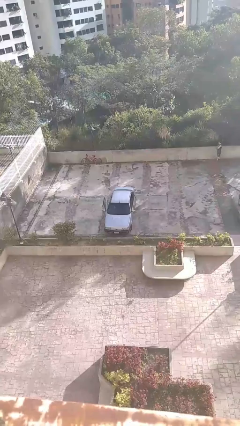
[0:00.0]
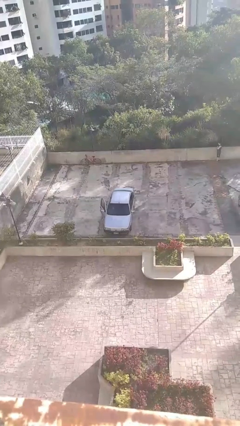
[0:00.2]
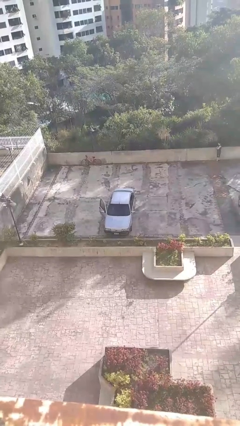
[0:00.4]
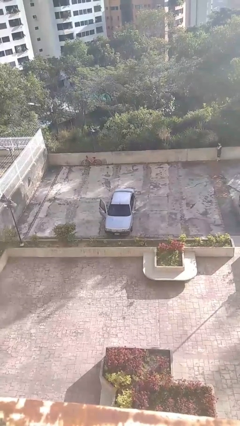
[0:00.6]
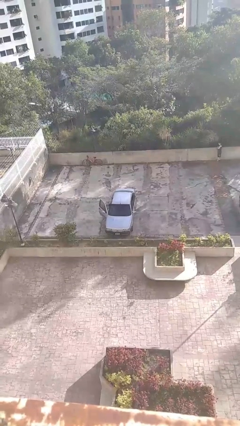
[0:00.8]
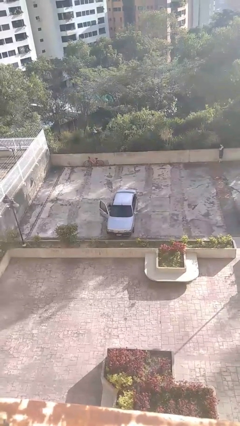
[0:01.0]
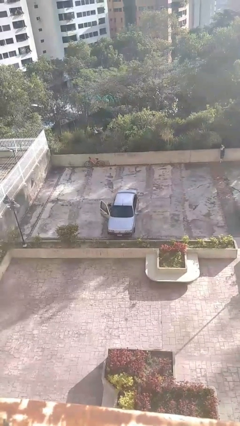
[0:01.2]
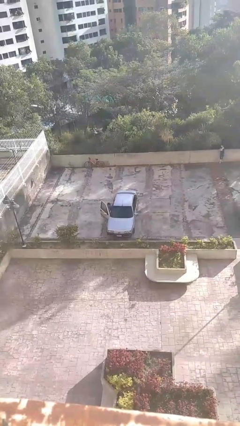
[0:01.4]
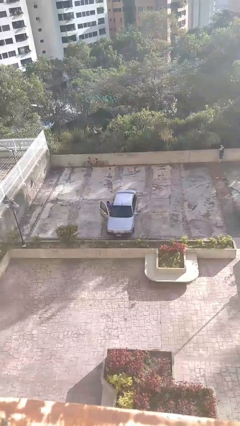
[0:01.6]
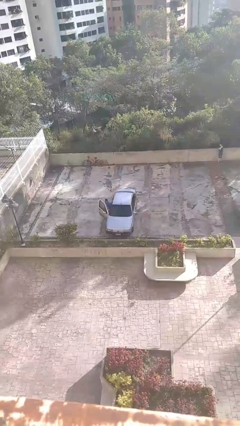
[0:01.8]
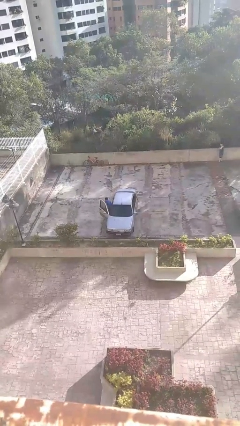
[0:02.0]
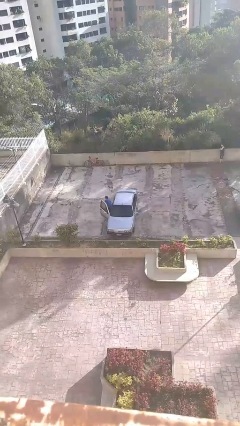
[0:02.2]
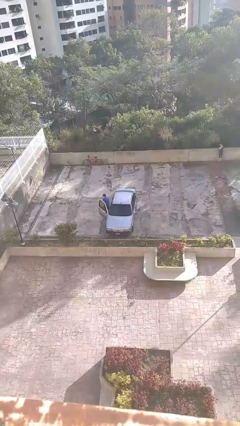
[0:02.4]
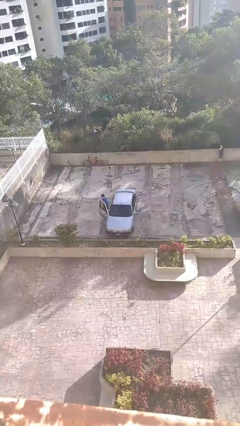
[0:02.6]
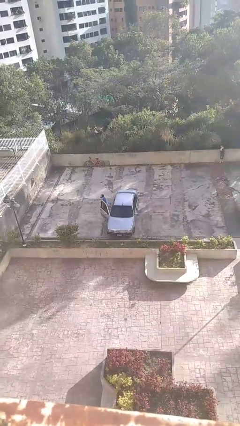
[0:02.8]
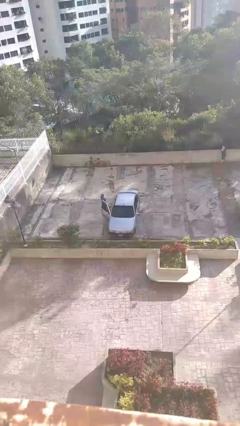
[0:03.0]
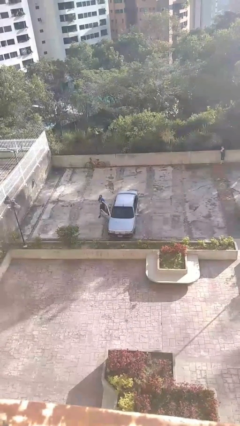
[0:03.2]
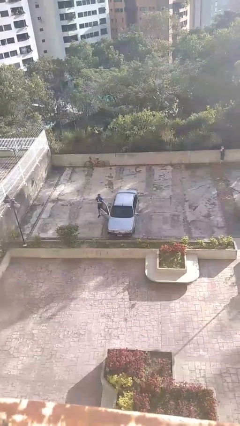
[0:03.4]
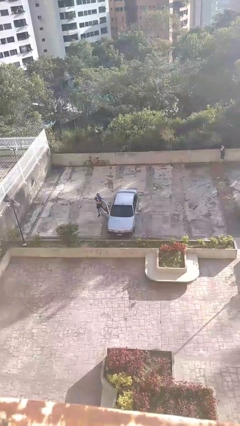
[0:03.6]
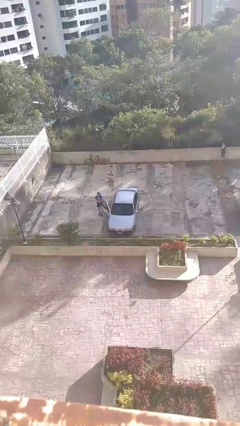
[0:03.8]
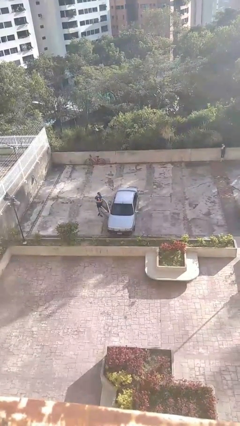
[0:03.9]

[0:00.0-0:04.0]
car drops off person

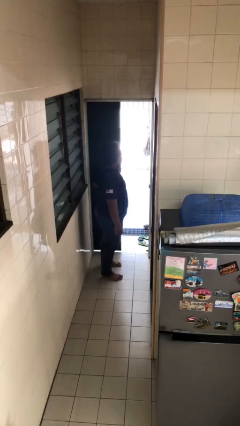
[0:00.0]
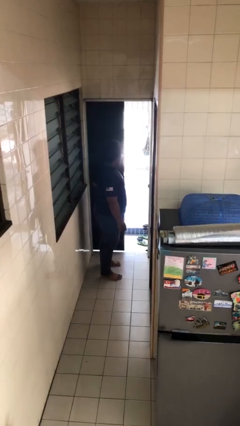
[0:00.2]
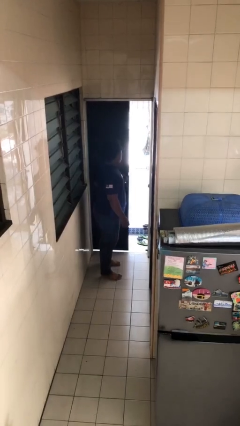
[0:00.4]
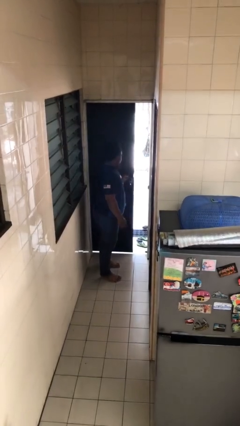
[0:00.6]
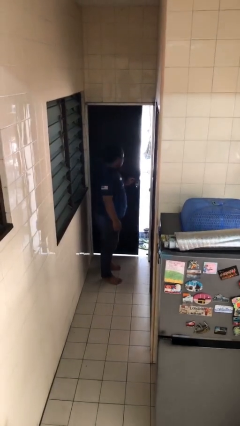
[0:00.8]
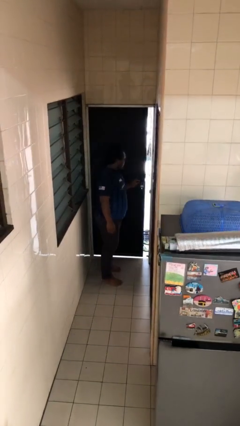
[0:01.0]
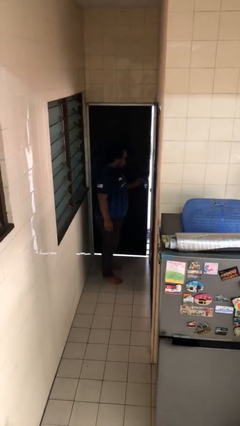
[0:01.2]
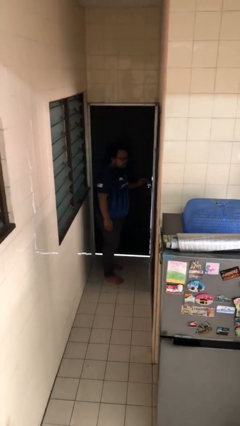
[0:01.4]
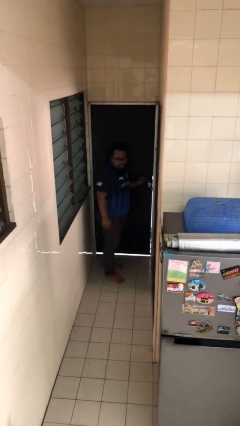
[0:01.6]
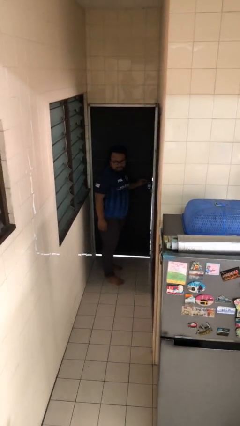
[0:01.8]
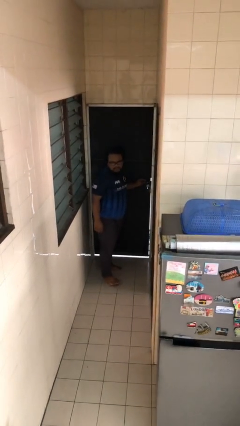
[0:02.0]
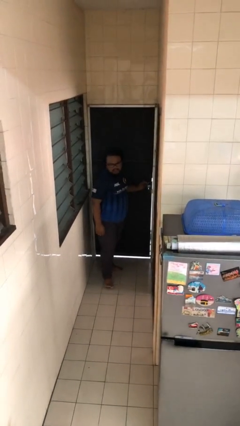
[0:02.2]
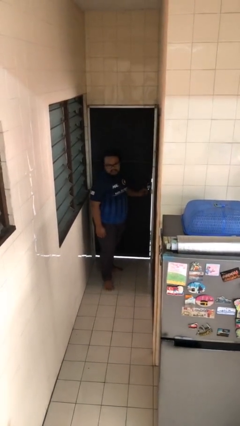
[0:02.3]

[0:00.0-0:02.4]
person closes facility door

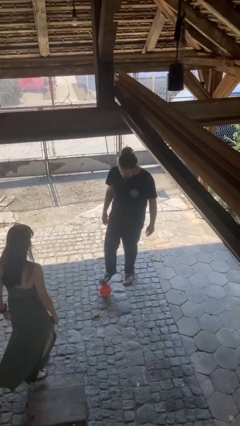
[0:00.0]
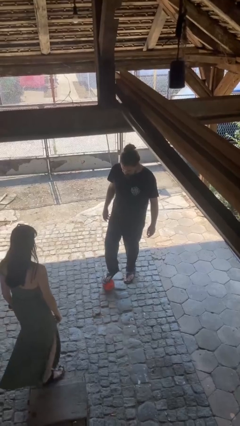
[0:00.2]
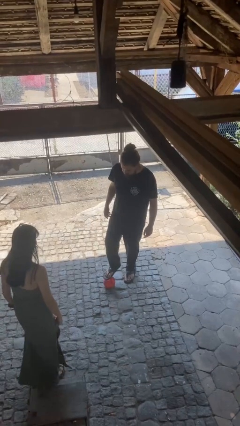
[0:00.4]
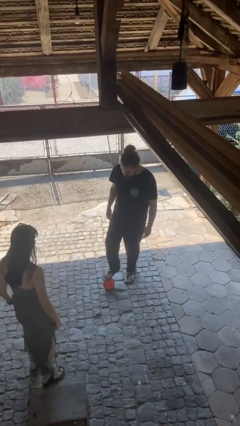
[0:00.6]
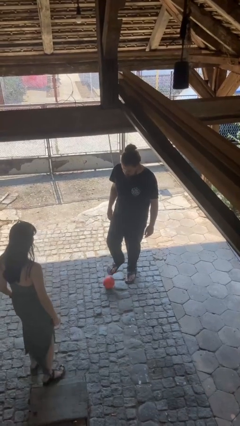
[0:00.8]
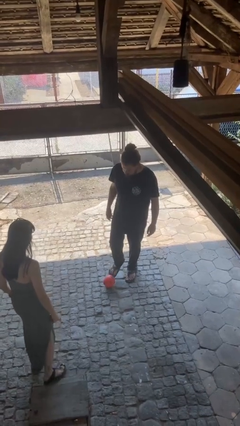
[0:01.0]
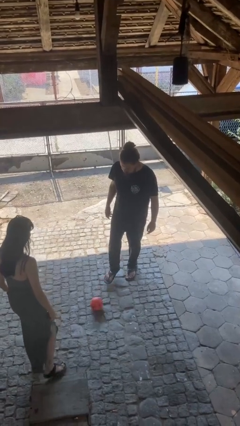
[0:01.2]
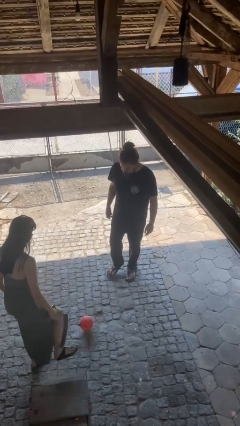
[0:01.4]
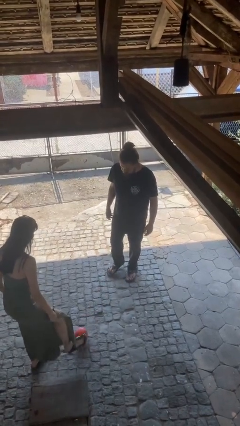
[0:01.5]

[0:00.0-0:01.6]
person kicks object to person

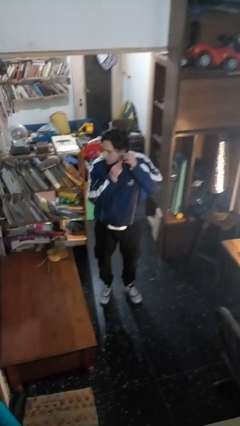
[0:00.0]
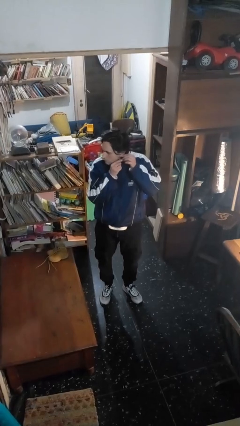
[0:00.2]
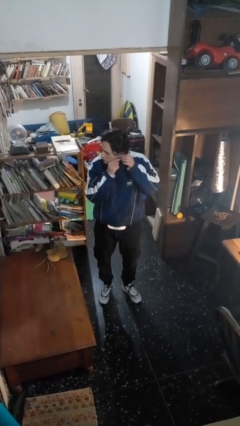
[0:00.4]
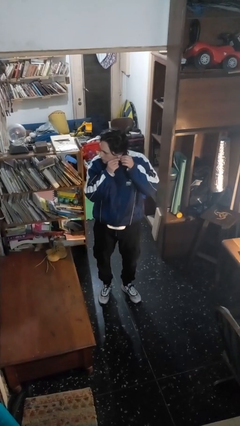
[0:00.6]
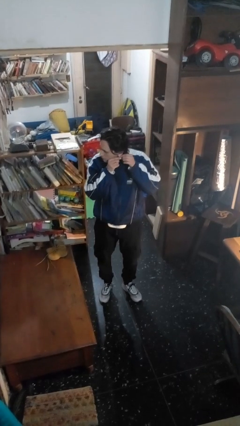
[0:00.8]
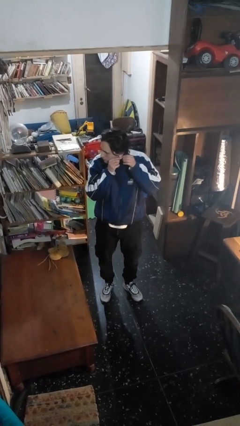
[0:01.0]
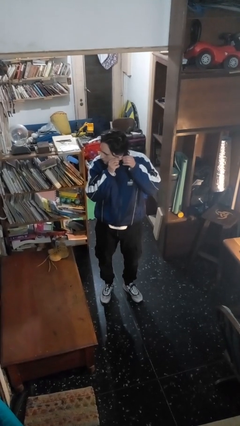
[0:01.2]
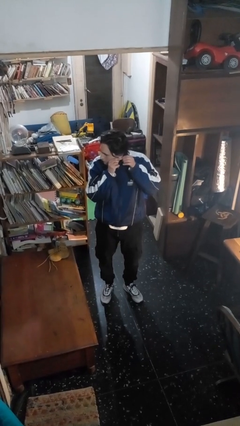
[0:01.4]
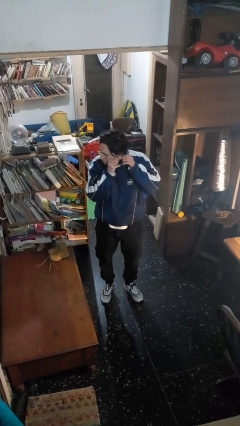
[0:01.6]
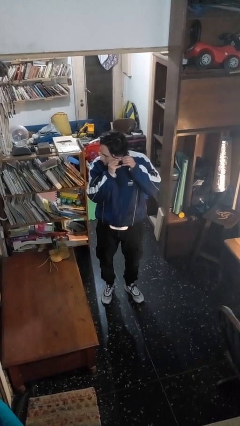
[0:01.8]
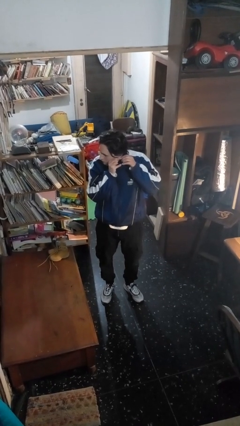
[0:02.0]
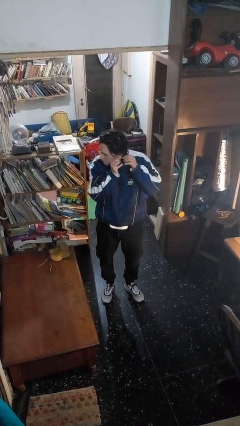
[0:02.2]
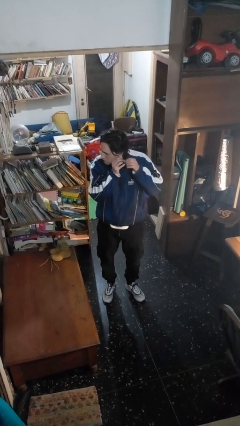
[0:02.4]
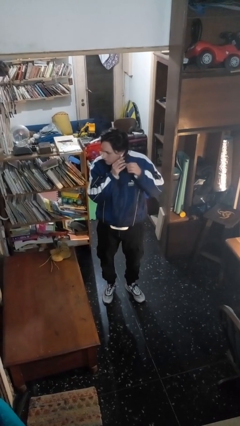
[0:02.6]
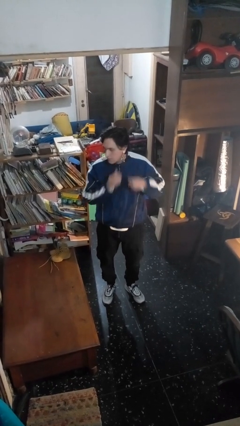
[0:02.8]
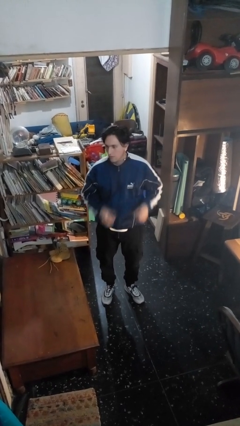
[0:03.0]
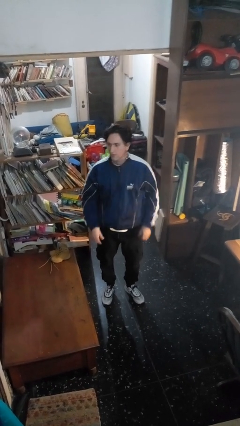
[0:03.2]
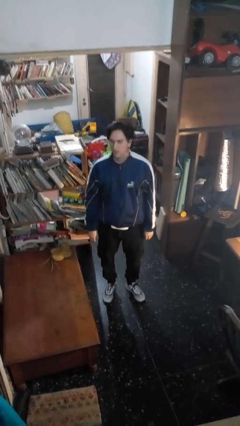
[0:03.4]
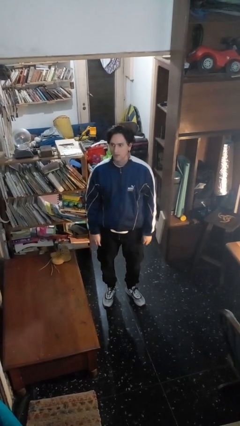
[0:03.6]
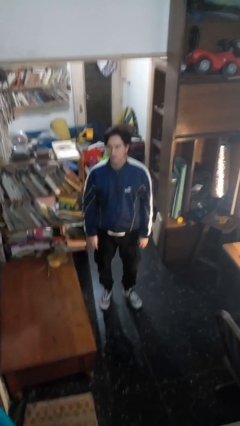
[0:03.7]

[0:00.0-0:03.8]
person puts on earrings

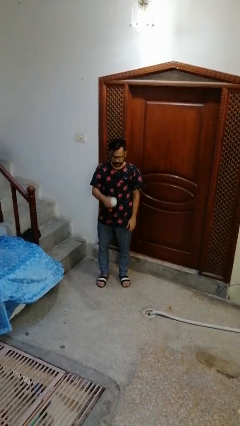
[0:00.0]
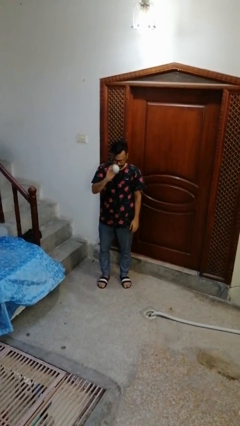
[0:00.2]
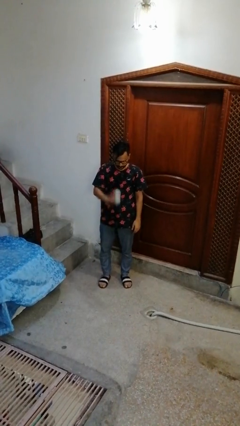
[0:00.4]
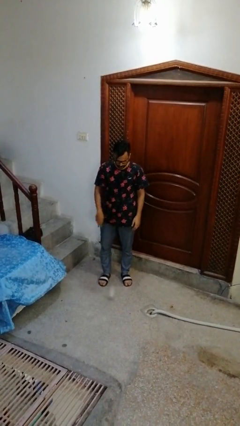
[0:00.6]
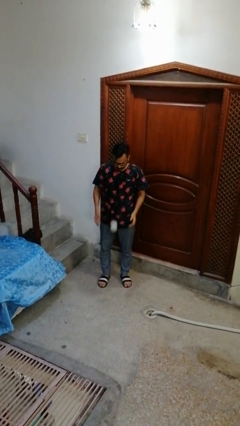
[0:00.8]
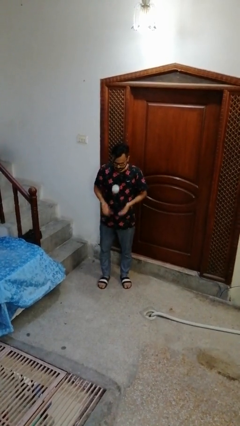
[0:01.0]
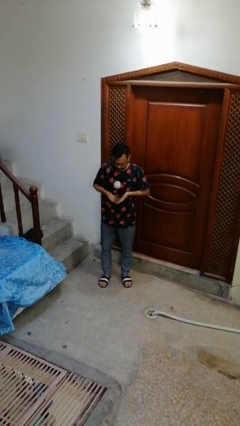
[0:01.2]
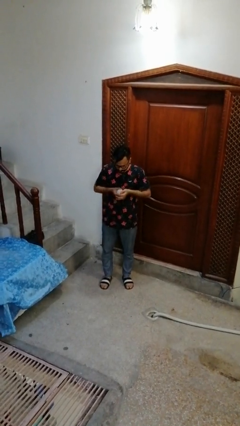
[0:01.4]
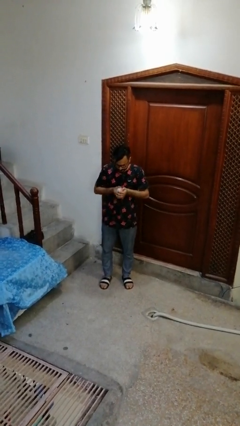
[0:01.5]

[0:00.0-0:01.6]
person bounces ball on floor

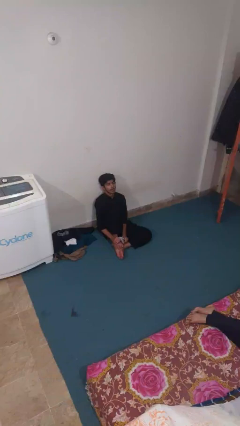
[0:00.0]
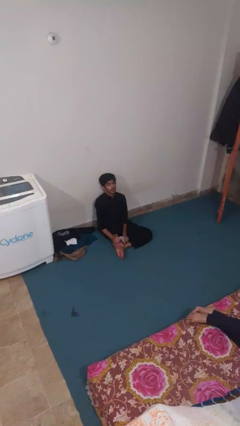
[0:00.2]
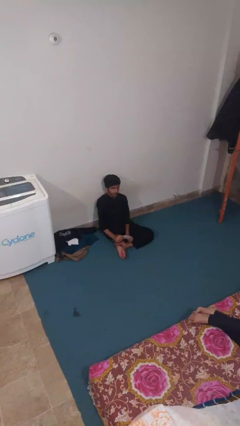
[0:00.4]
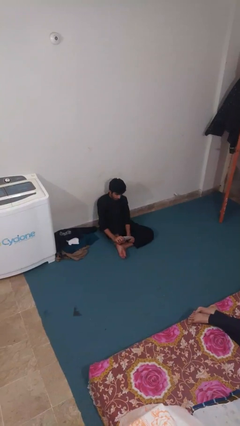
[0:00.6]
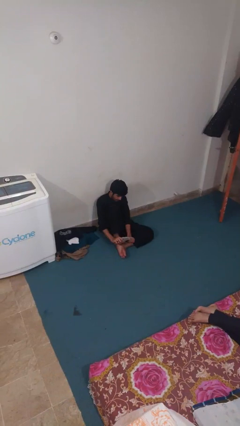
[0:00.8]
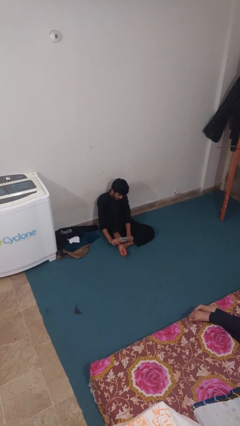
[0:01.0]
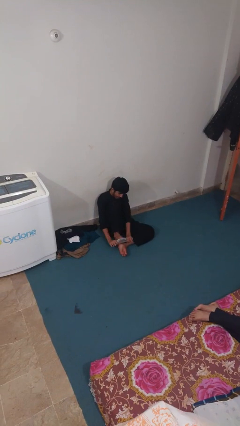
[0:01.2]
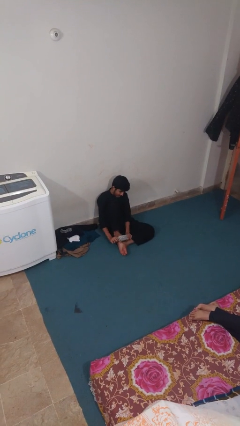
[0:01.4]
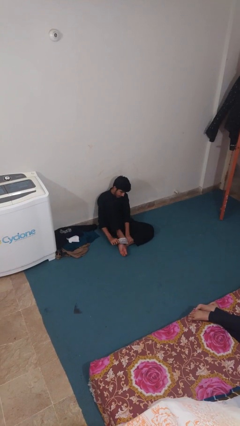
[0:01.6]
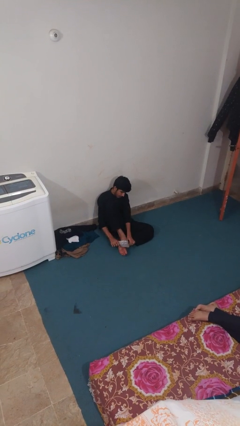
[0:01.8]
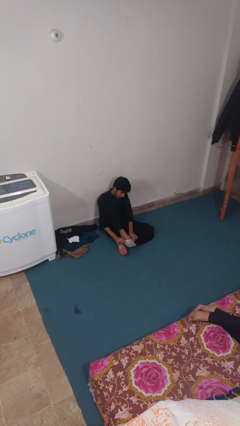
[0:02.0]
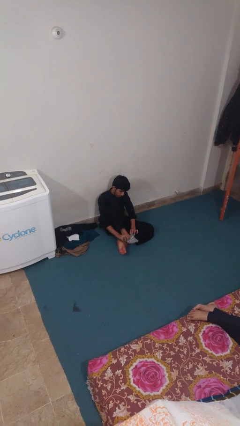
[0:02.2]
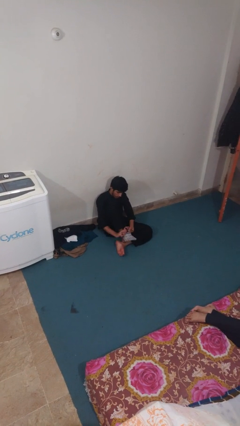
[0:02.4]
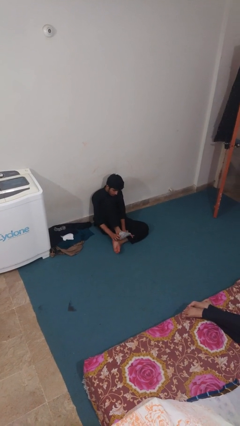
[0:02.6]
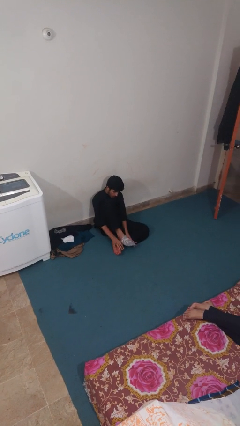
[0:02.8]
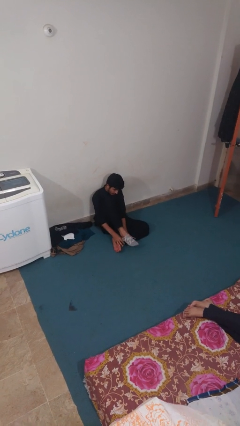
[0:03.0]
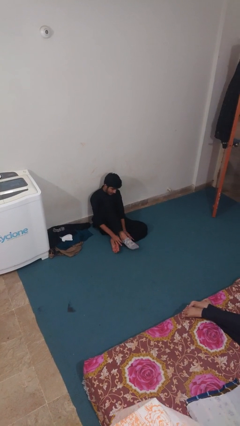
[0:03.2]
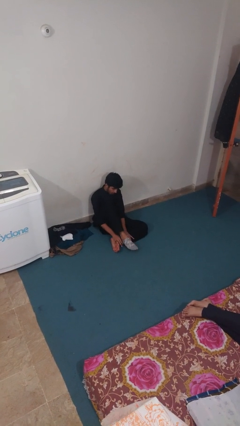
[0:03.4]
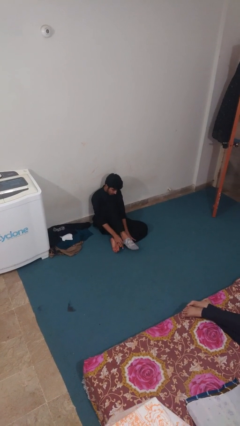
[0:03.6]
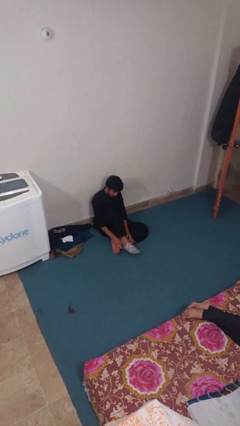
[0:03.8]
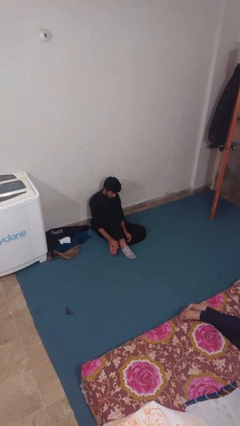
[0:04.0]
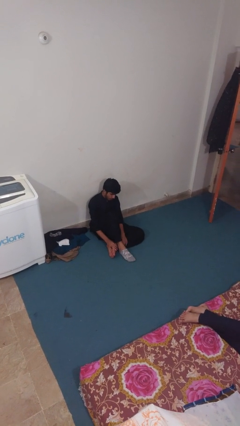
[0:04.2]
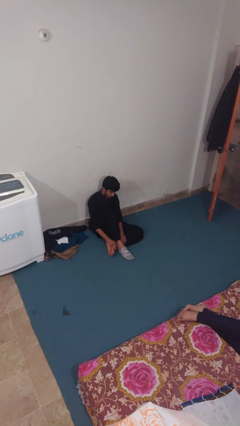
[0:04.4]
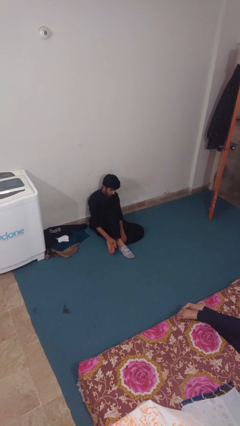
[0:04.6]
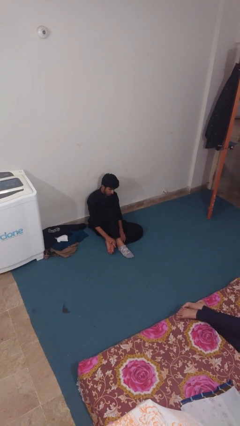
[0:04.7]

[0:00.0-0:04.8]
person puts on socks
